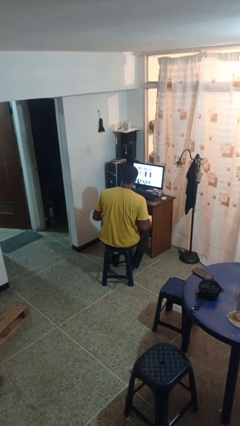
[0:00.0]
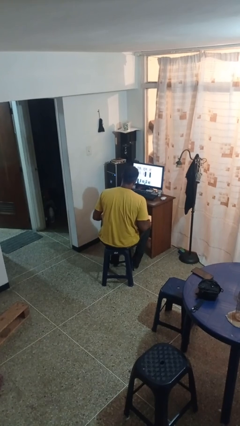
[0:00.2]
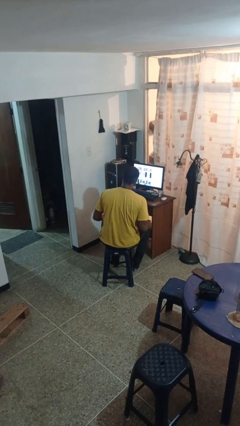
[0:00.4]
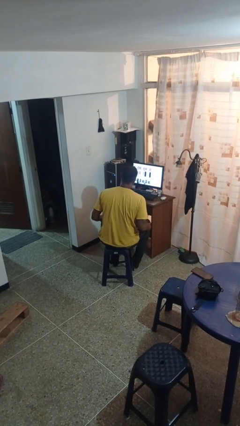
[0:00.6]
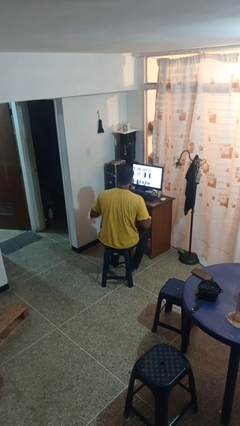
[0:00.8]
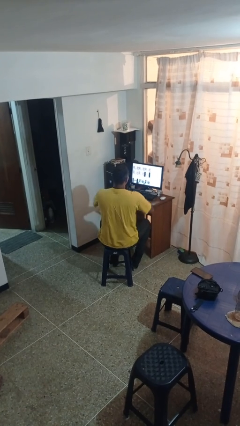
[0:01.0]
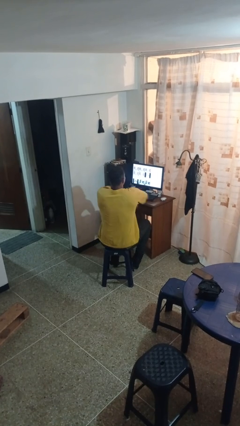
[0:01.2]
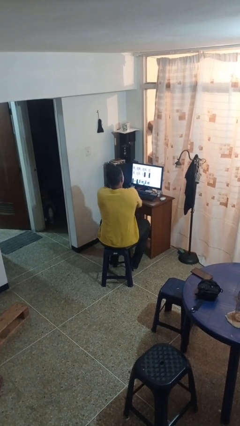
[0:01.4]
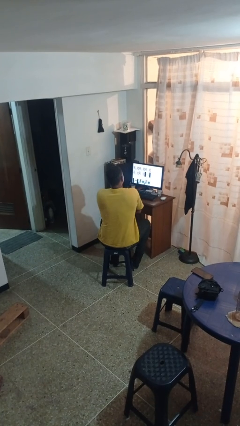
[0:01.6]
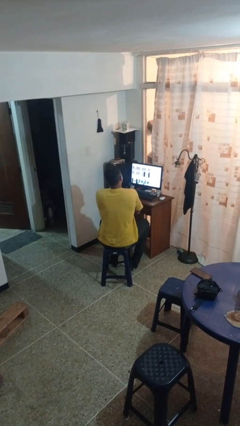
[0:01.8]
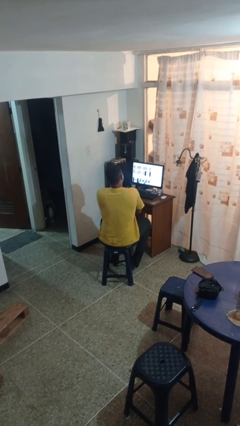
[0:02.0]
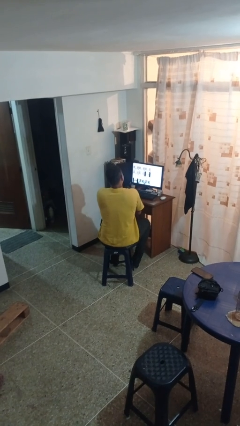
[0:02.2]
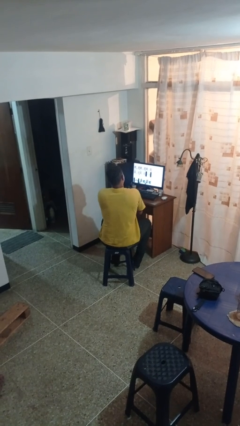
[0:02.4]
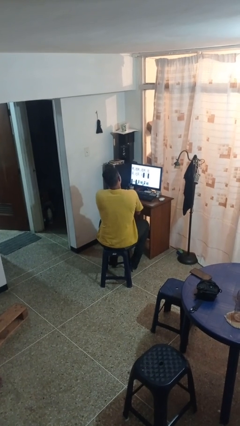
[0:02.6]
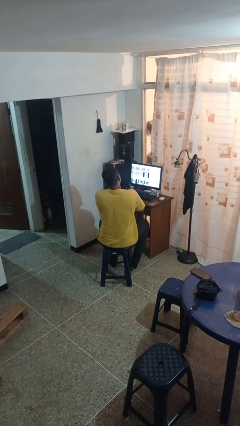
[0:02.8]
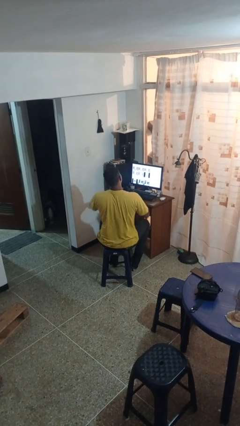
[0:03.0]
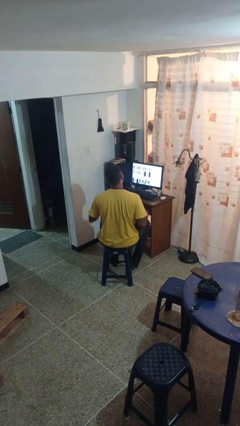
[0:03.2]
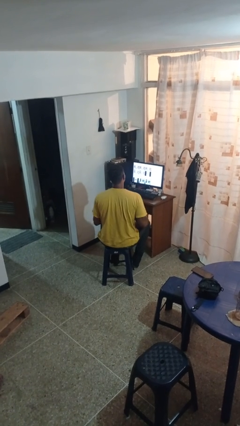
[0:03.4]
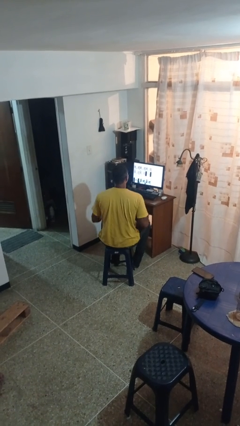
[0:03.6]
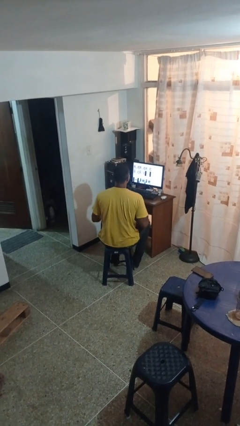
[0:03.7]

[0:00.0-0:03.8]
person crosses arms

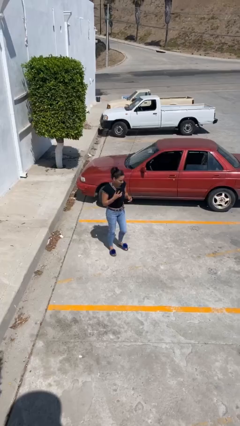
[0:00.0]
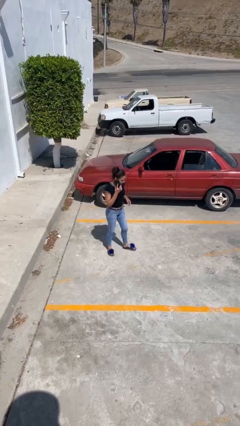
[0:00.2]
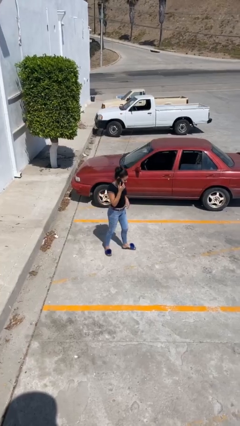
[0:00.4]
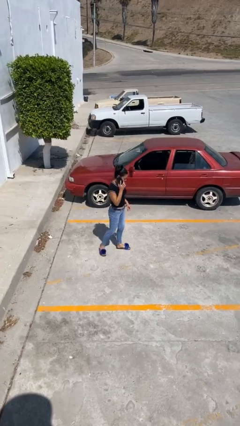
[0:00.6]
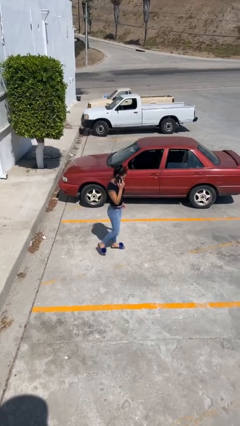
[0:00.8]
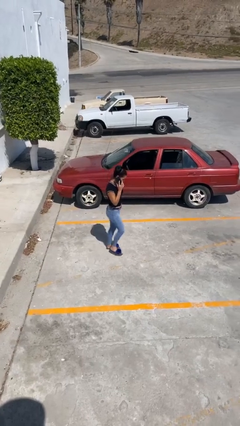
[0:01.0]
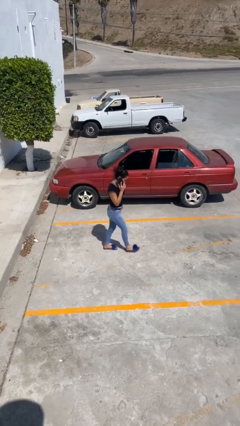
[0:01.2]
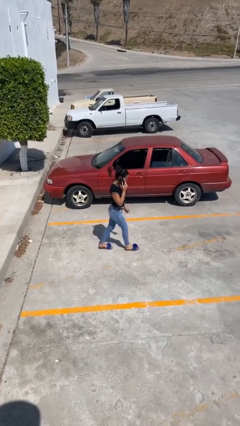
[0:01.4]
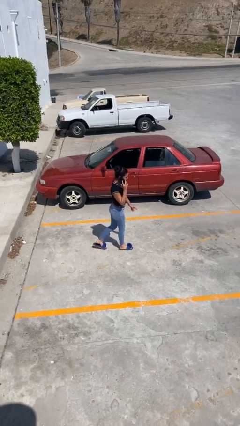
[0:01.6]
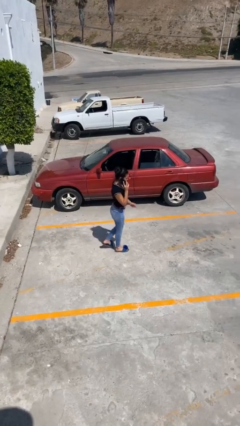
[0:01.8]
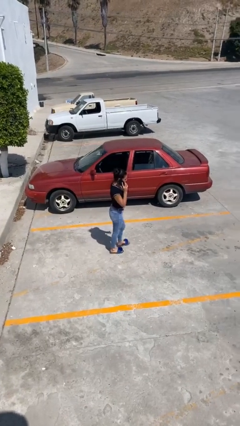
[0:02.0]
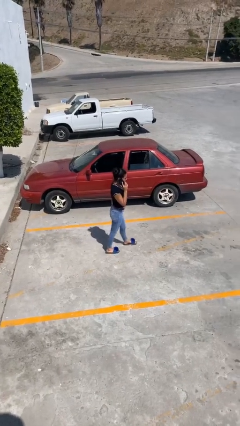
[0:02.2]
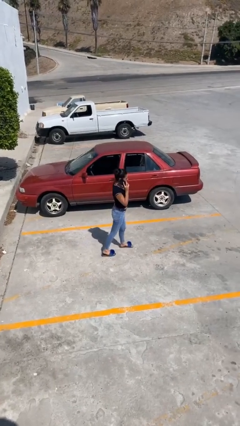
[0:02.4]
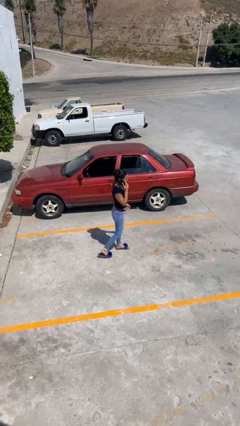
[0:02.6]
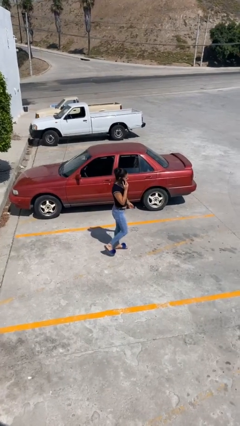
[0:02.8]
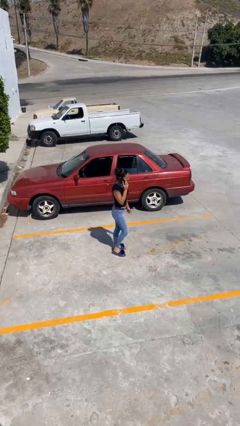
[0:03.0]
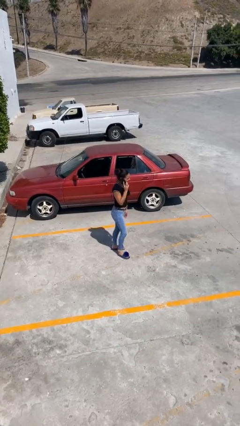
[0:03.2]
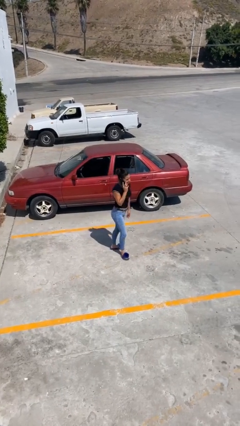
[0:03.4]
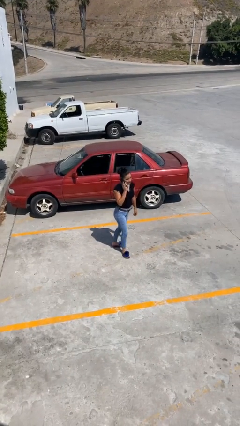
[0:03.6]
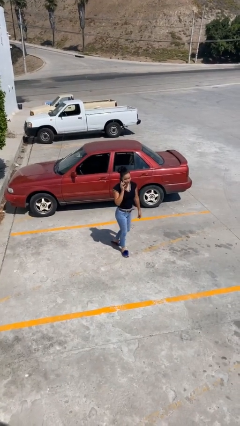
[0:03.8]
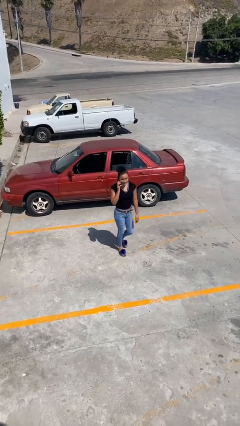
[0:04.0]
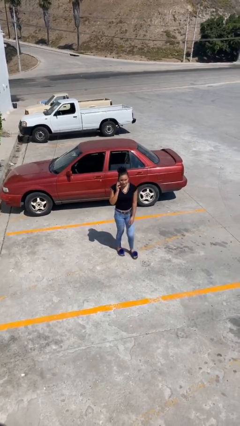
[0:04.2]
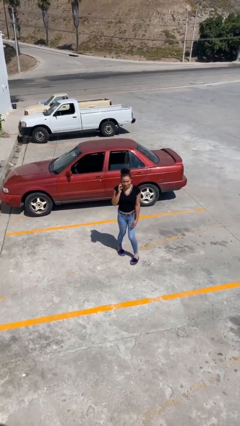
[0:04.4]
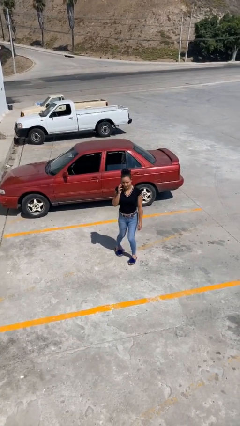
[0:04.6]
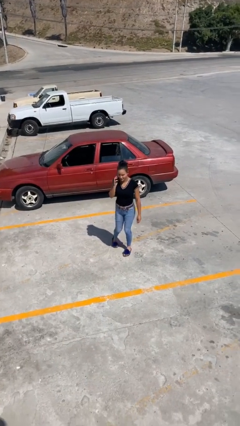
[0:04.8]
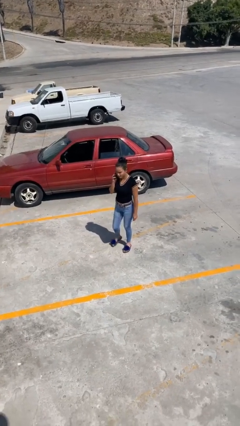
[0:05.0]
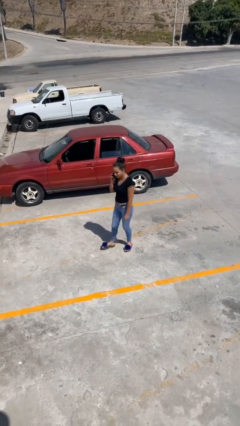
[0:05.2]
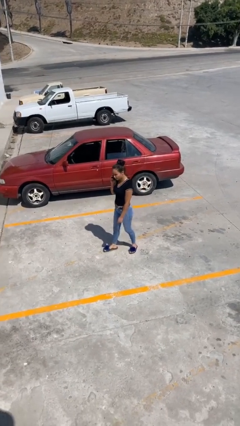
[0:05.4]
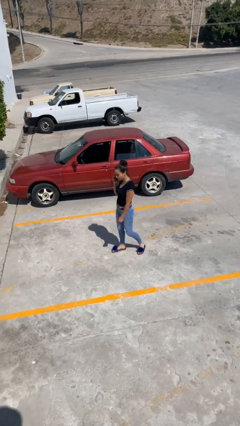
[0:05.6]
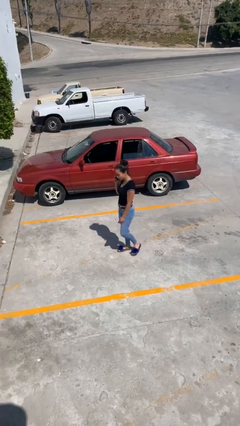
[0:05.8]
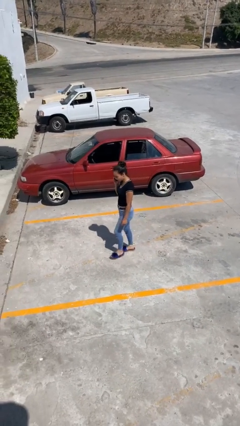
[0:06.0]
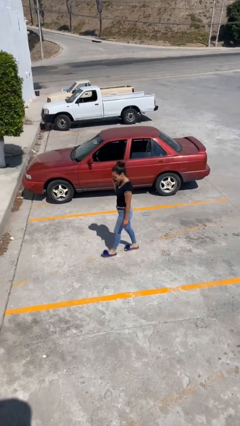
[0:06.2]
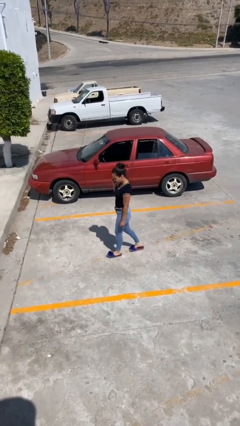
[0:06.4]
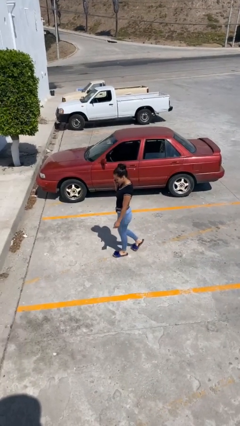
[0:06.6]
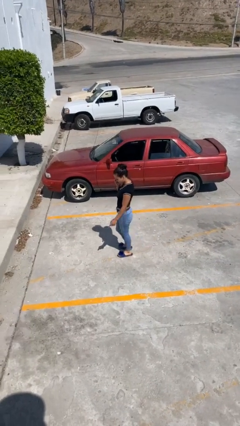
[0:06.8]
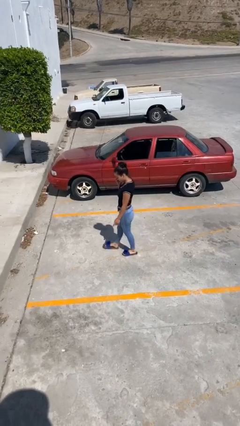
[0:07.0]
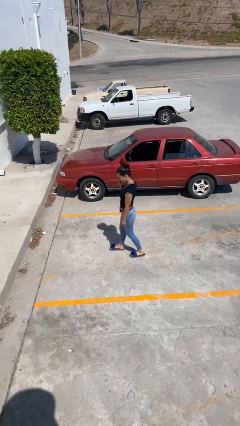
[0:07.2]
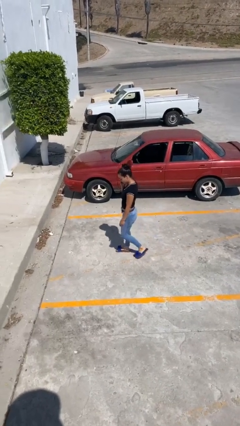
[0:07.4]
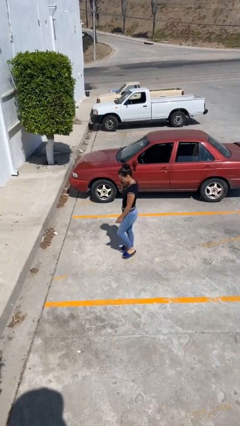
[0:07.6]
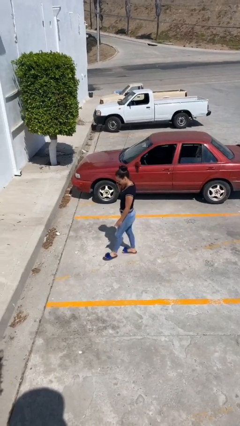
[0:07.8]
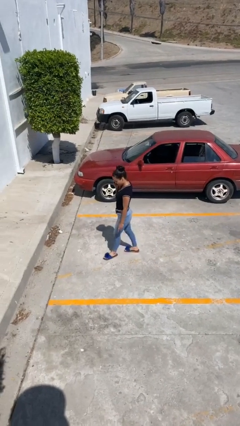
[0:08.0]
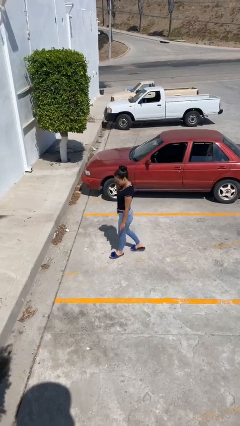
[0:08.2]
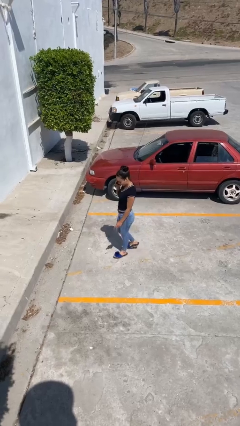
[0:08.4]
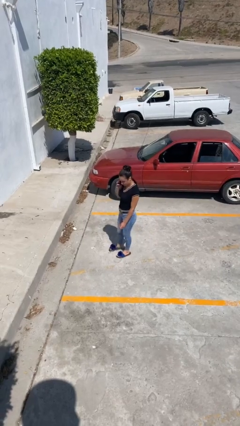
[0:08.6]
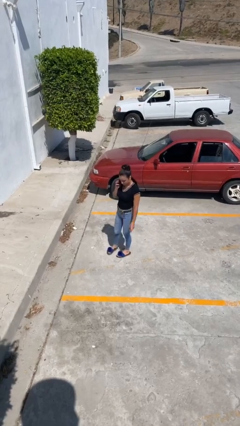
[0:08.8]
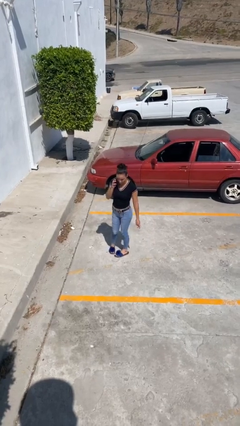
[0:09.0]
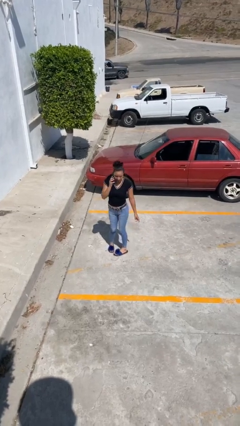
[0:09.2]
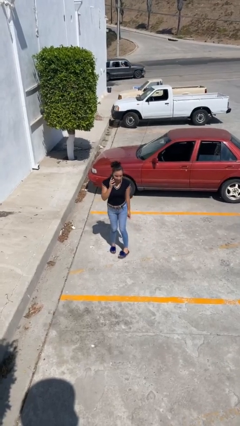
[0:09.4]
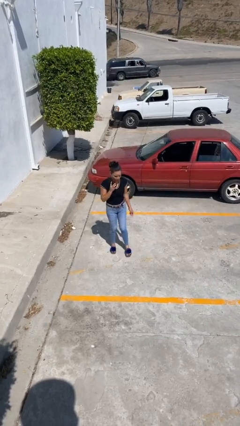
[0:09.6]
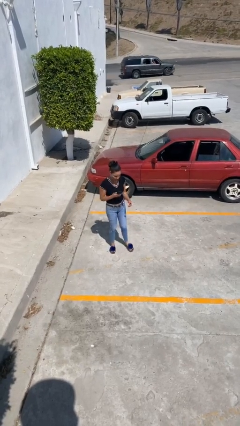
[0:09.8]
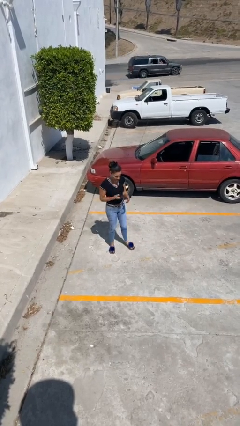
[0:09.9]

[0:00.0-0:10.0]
person talks on phone

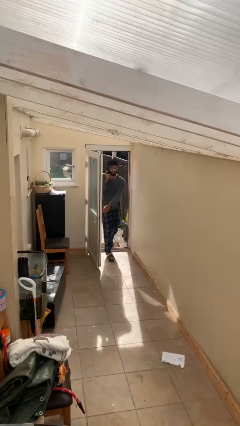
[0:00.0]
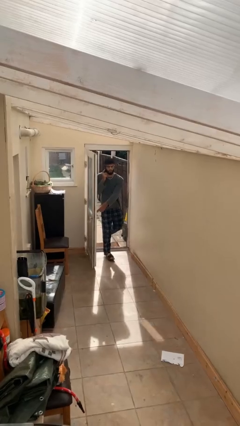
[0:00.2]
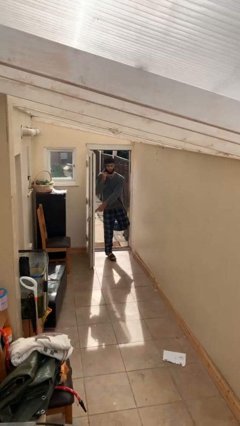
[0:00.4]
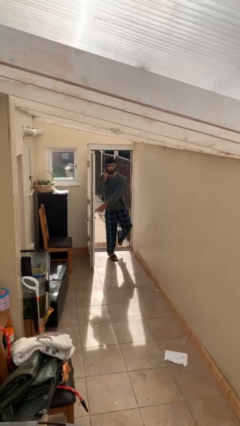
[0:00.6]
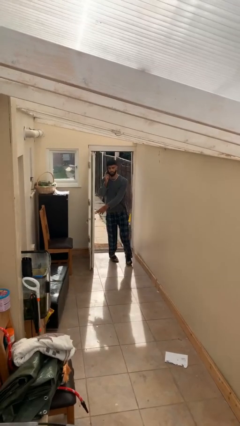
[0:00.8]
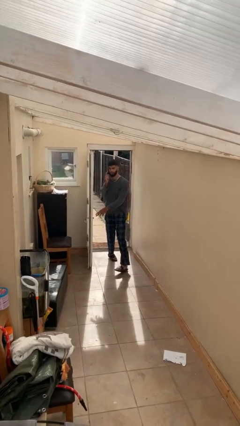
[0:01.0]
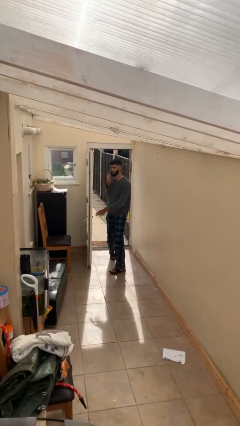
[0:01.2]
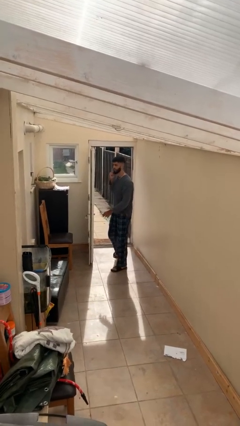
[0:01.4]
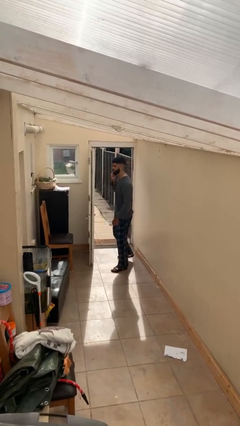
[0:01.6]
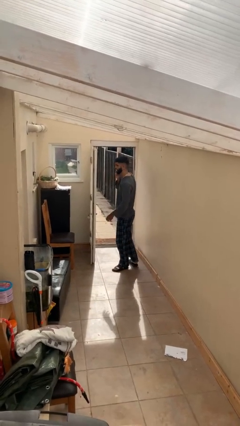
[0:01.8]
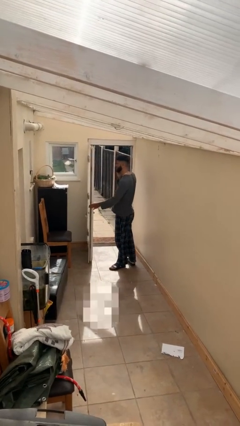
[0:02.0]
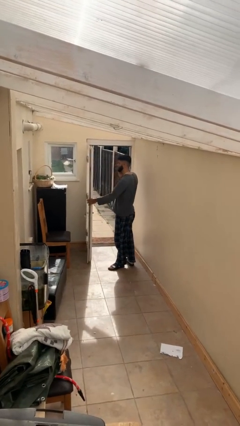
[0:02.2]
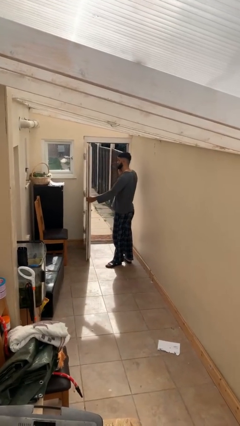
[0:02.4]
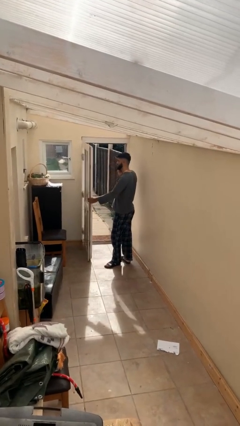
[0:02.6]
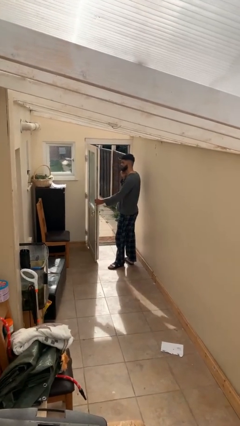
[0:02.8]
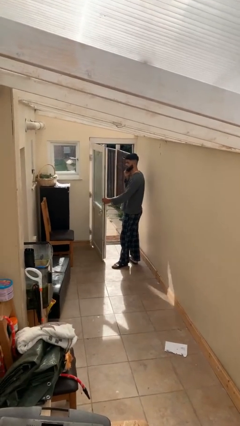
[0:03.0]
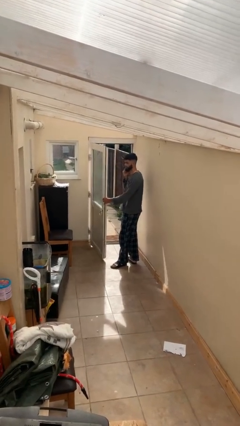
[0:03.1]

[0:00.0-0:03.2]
person enters scene through structure

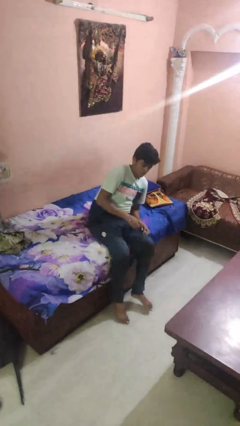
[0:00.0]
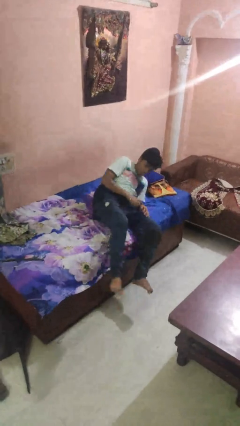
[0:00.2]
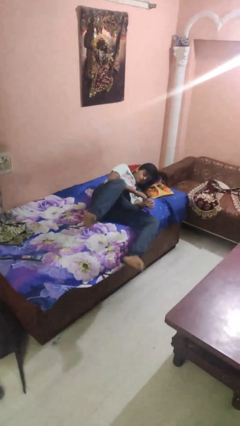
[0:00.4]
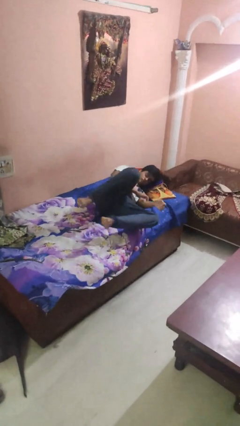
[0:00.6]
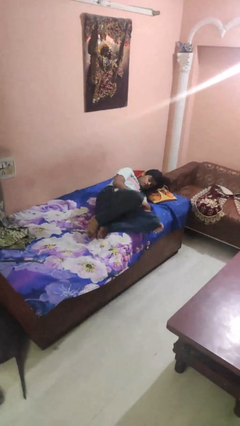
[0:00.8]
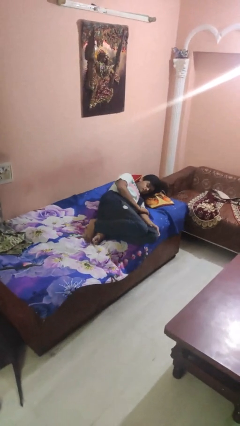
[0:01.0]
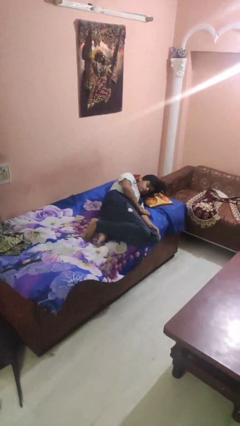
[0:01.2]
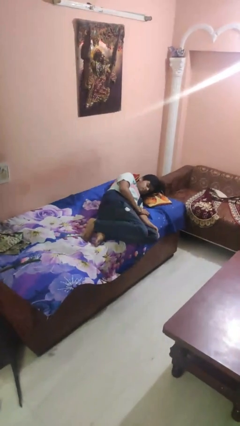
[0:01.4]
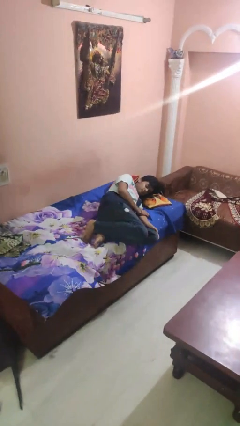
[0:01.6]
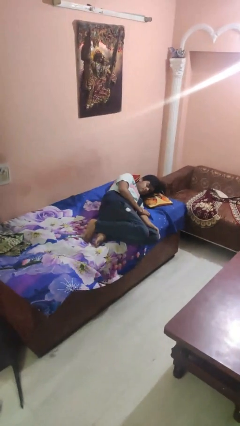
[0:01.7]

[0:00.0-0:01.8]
person lies down on bed
